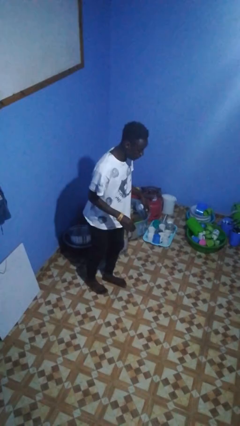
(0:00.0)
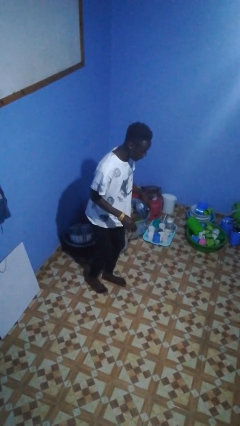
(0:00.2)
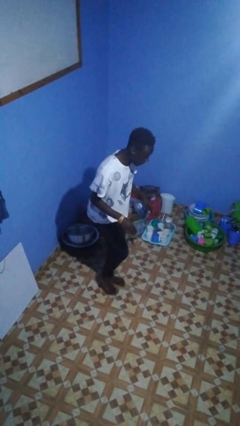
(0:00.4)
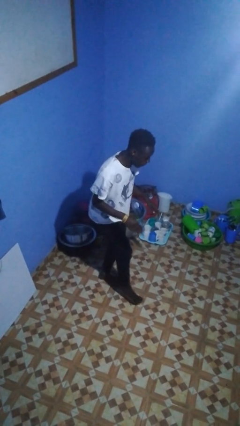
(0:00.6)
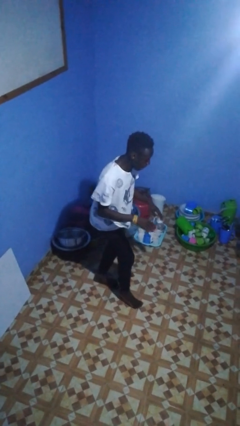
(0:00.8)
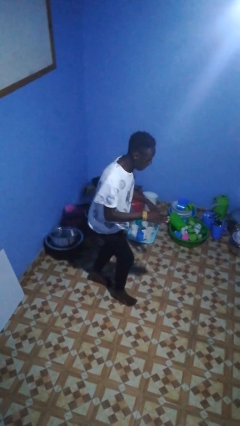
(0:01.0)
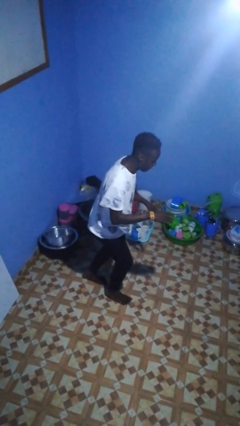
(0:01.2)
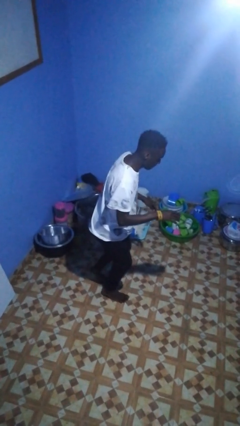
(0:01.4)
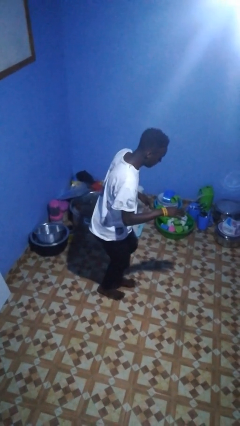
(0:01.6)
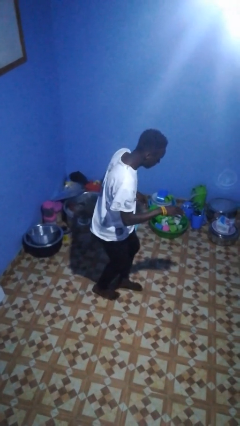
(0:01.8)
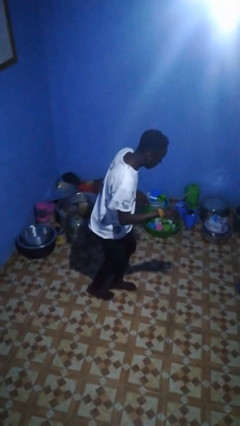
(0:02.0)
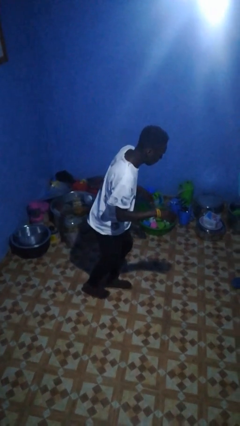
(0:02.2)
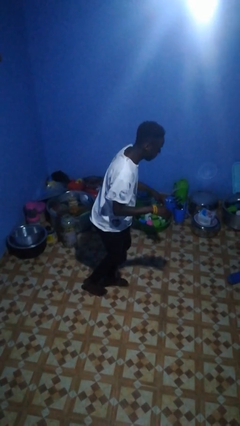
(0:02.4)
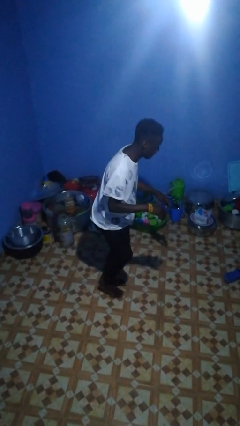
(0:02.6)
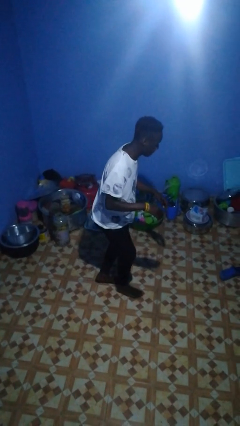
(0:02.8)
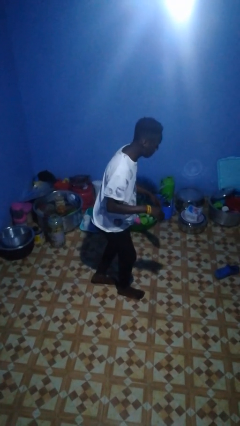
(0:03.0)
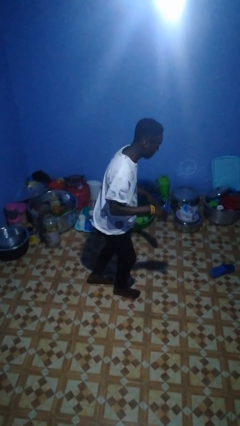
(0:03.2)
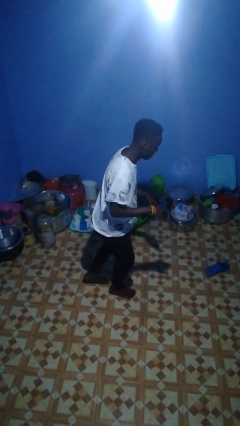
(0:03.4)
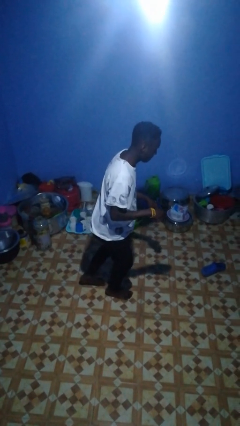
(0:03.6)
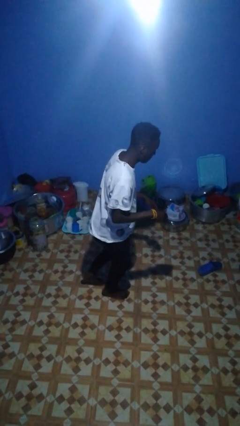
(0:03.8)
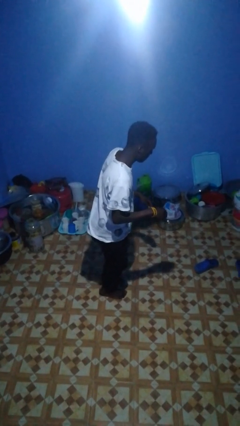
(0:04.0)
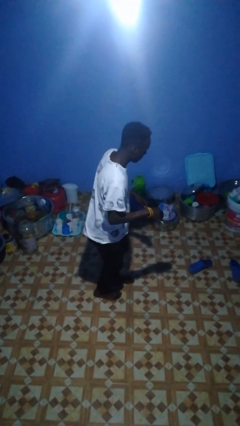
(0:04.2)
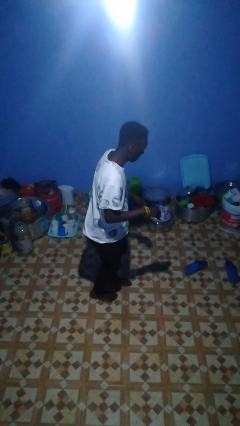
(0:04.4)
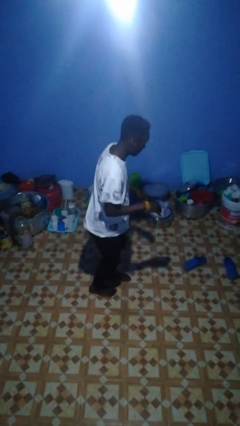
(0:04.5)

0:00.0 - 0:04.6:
person walks tiptoe

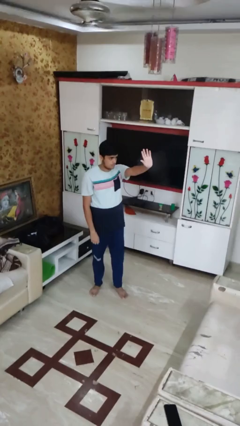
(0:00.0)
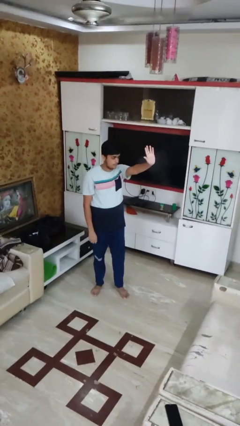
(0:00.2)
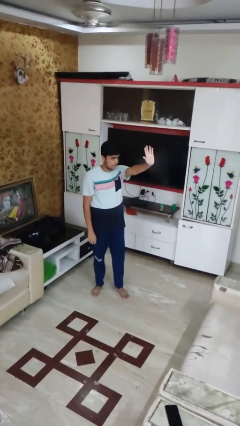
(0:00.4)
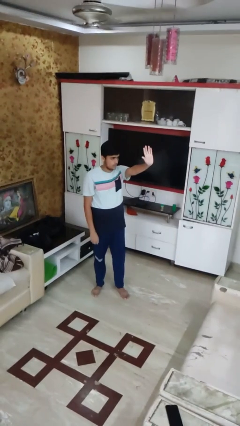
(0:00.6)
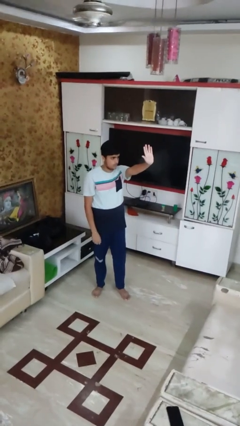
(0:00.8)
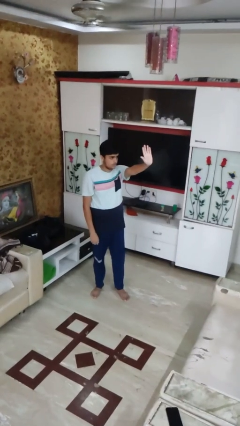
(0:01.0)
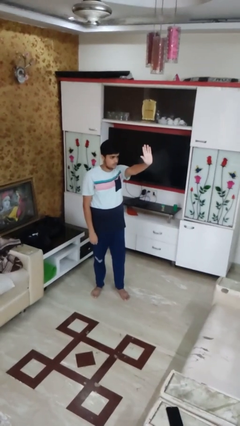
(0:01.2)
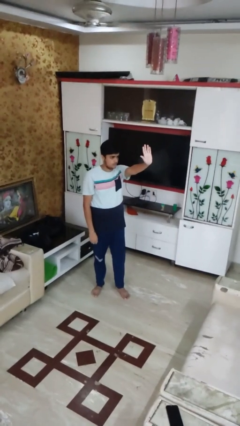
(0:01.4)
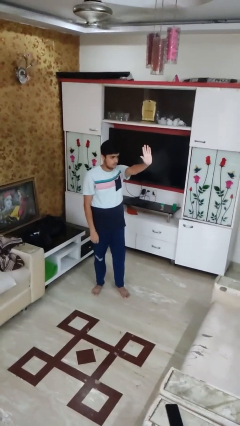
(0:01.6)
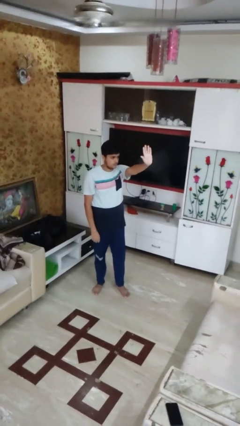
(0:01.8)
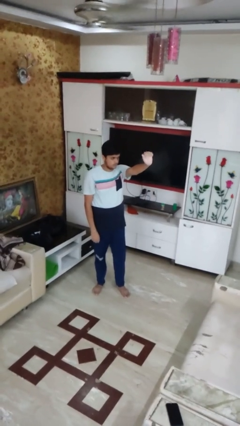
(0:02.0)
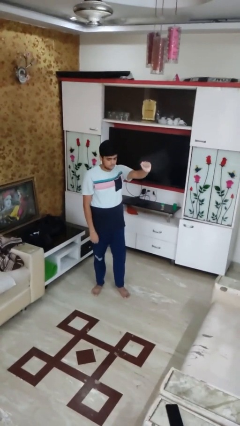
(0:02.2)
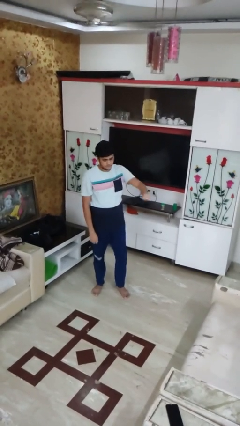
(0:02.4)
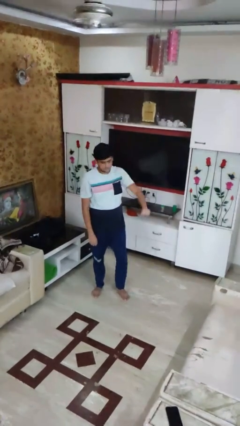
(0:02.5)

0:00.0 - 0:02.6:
person gestures stop

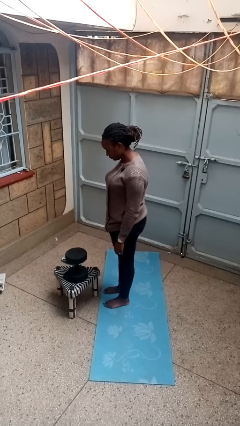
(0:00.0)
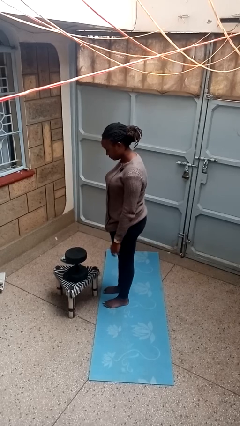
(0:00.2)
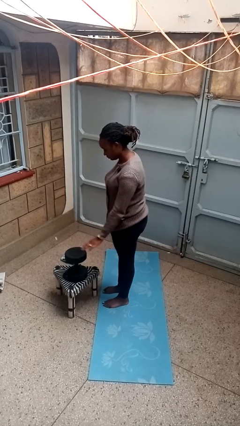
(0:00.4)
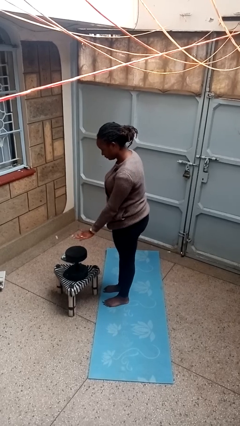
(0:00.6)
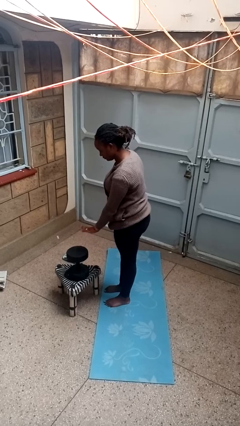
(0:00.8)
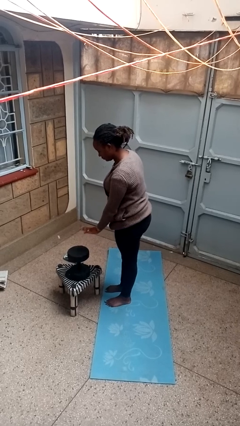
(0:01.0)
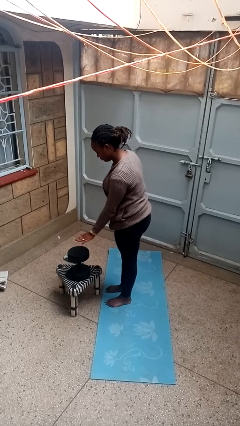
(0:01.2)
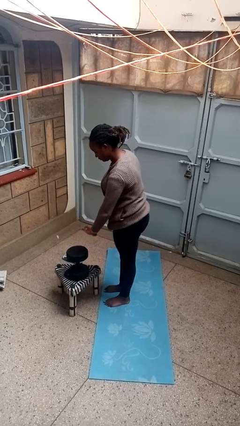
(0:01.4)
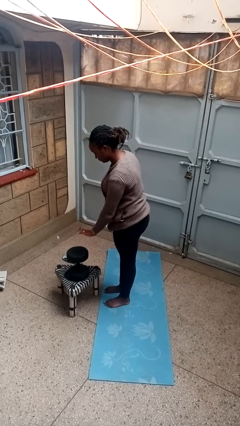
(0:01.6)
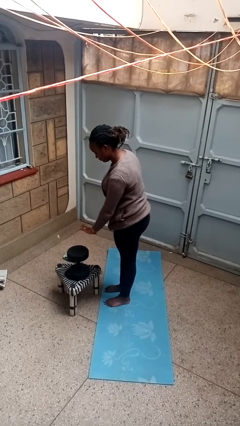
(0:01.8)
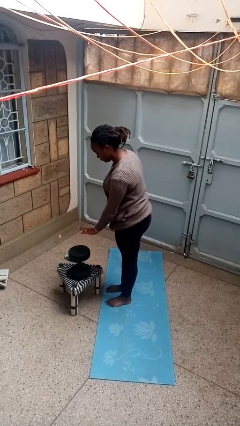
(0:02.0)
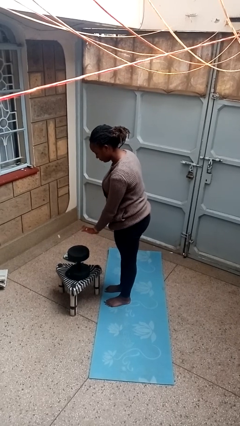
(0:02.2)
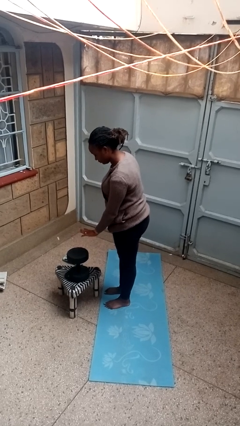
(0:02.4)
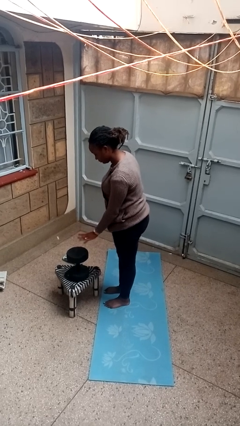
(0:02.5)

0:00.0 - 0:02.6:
person waves hand over object

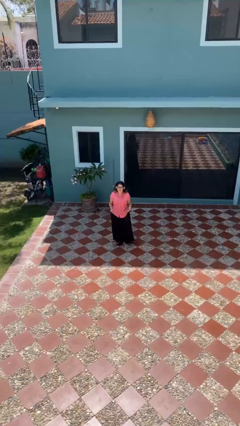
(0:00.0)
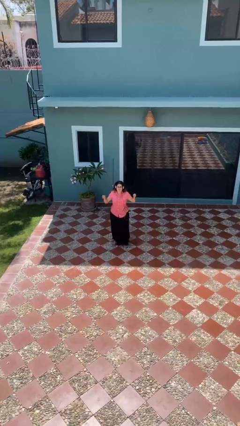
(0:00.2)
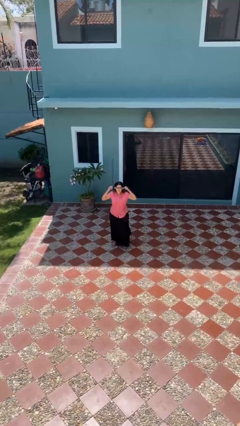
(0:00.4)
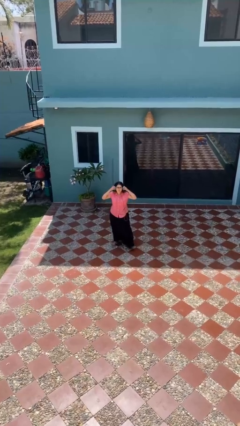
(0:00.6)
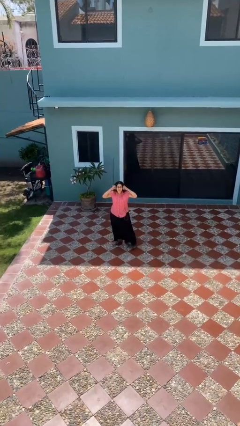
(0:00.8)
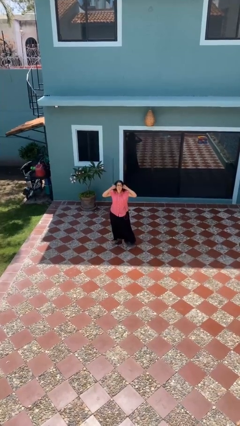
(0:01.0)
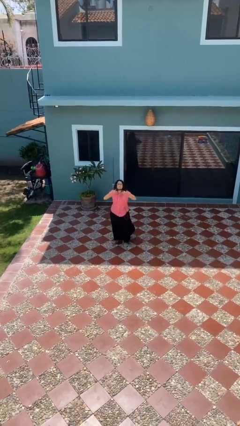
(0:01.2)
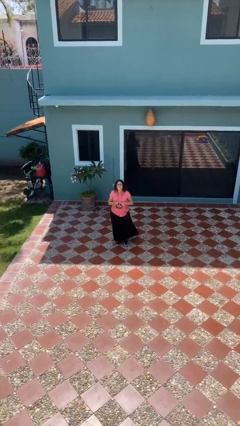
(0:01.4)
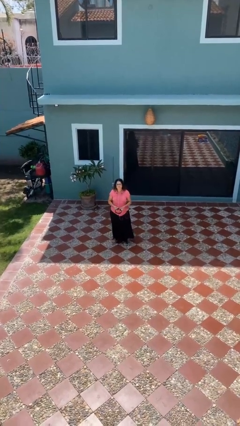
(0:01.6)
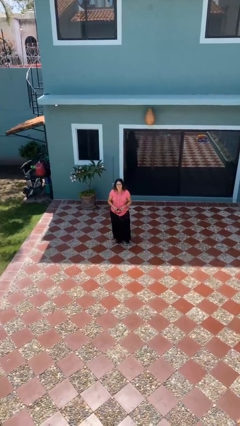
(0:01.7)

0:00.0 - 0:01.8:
person takes off headphones

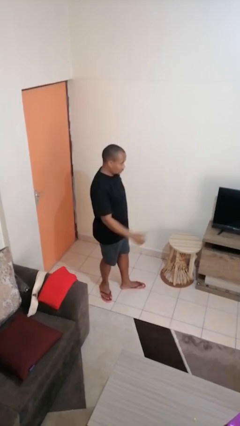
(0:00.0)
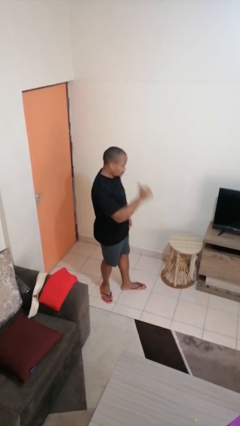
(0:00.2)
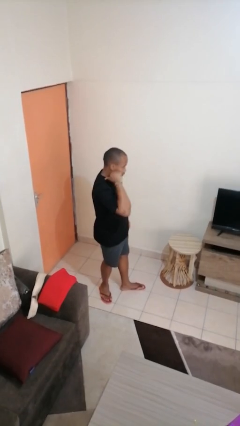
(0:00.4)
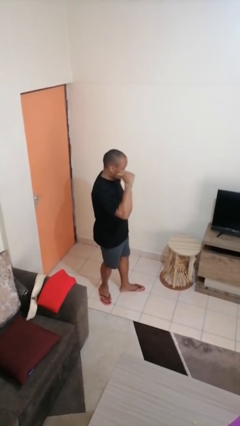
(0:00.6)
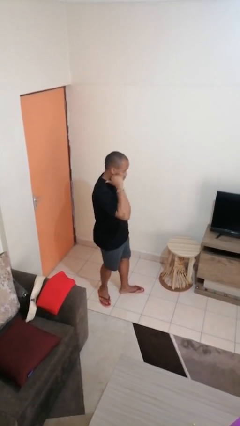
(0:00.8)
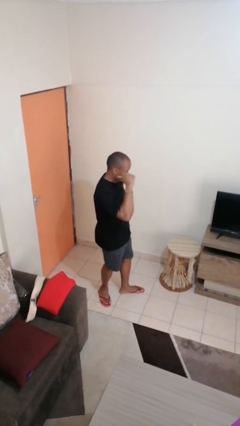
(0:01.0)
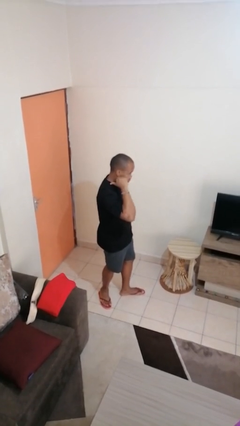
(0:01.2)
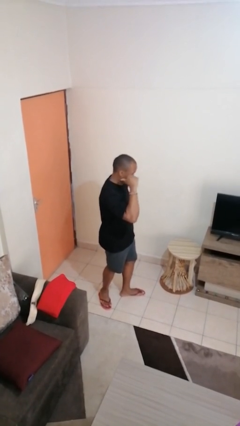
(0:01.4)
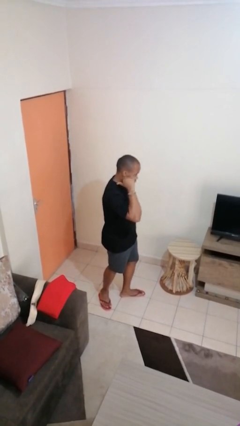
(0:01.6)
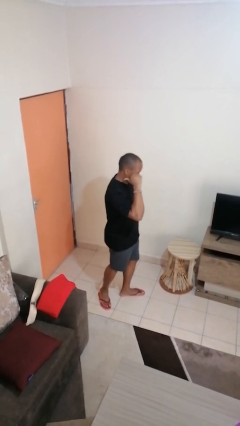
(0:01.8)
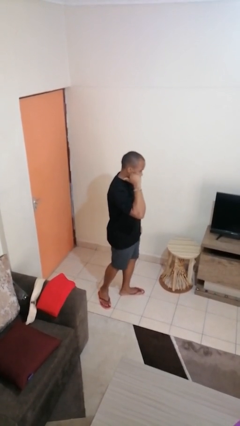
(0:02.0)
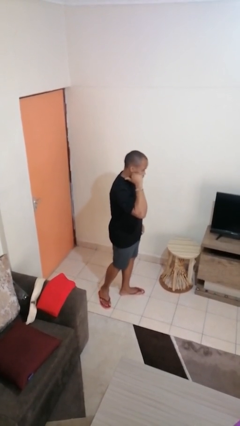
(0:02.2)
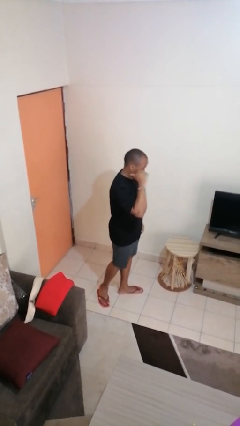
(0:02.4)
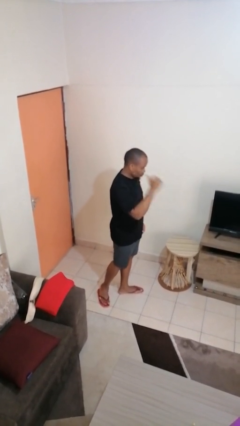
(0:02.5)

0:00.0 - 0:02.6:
person gestures behind me

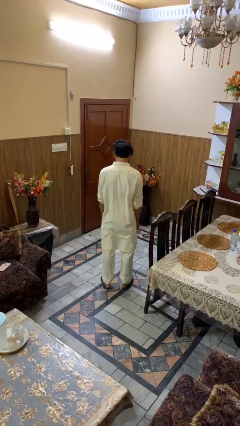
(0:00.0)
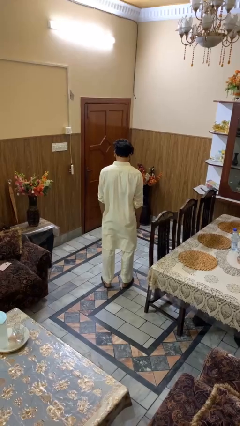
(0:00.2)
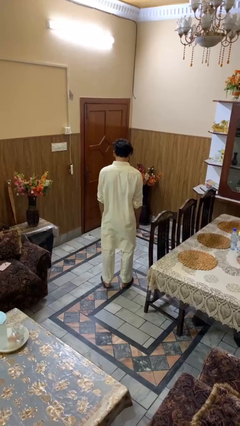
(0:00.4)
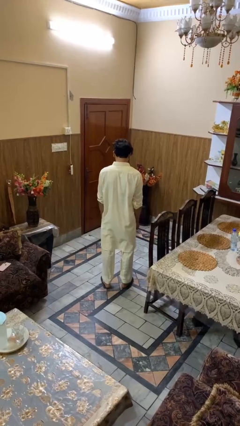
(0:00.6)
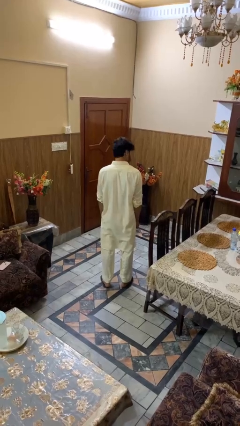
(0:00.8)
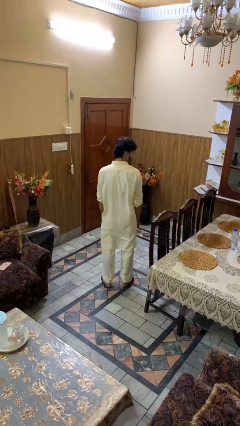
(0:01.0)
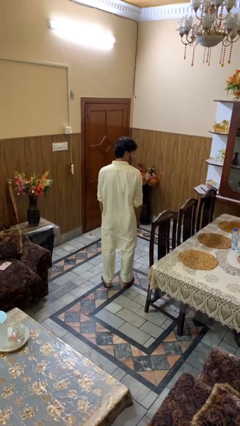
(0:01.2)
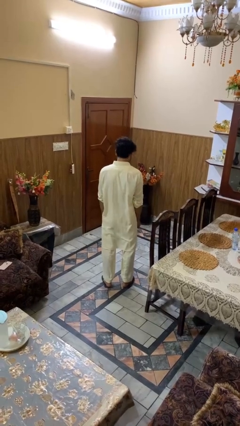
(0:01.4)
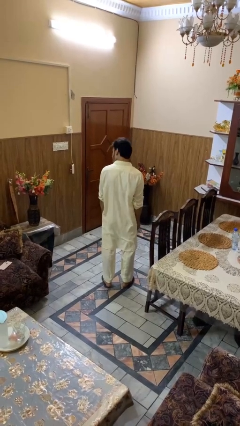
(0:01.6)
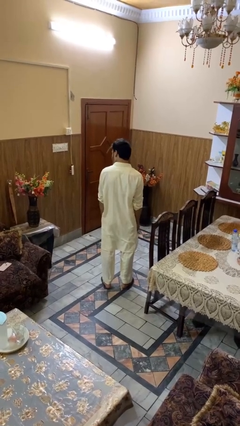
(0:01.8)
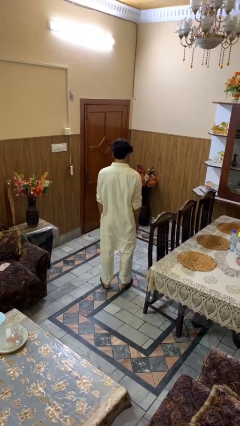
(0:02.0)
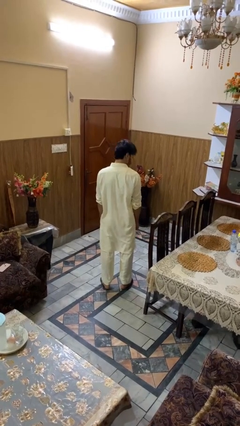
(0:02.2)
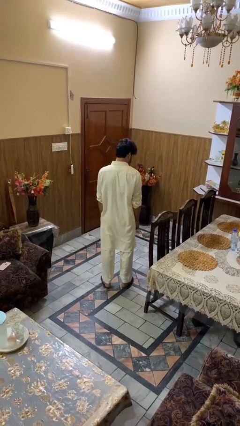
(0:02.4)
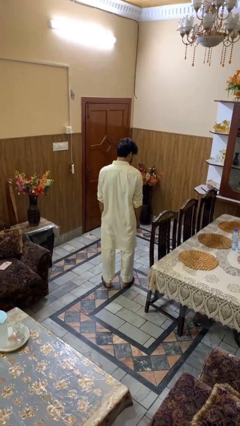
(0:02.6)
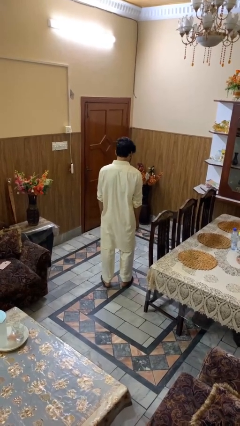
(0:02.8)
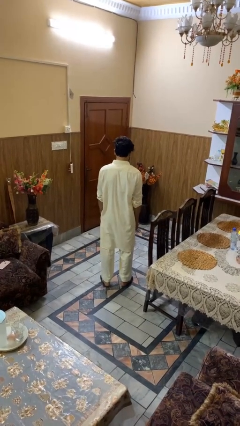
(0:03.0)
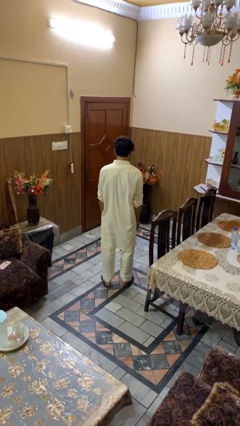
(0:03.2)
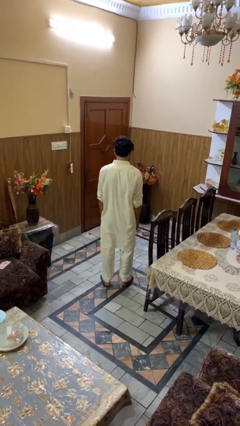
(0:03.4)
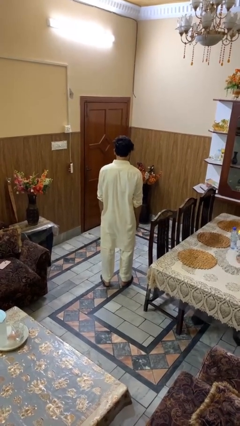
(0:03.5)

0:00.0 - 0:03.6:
person shakes head
